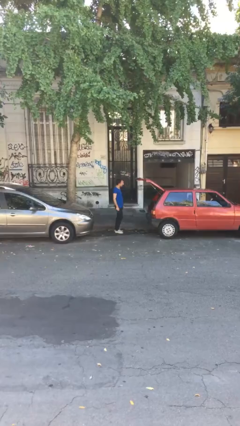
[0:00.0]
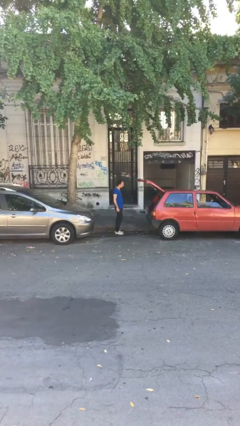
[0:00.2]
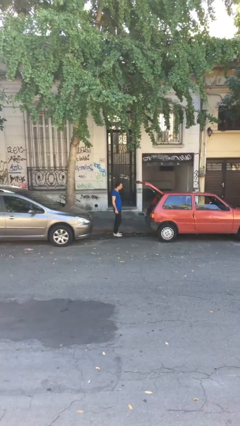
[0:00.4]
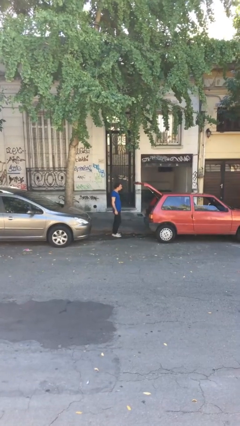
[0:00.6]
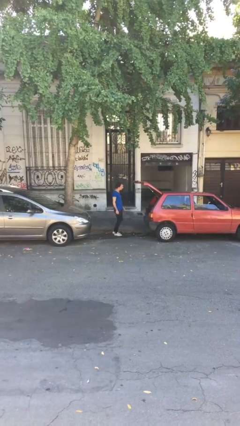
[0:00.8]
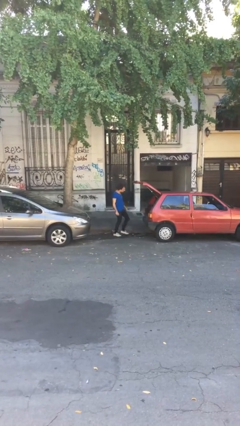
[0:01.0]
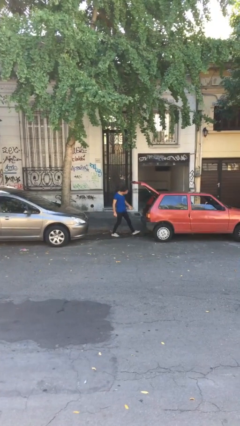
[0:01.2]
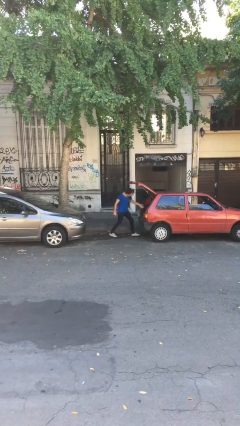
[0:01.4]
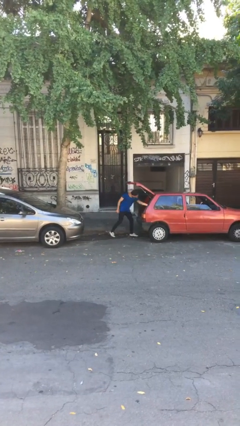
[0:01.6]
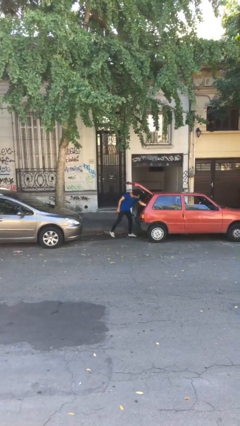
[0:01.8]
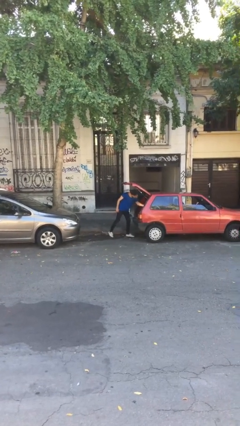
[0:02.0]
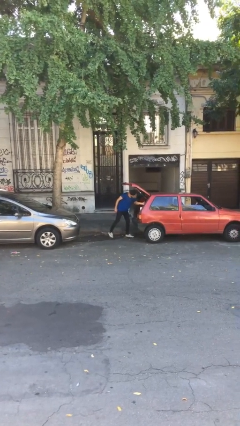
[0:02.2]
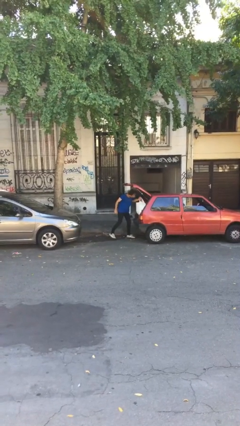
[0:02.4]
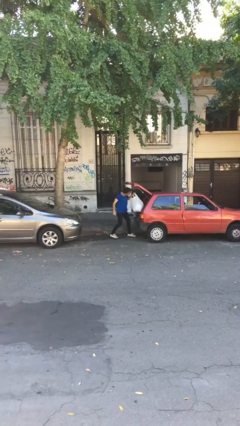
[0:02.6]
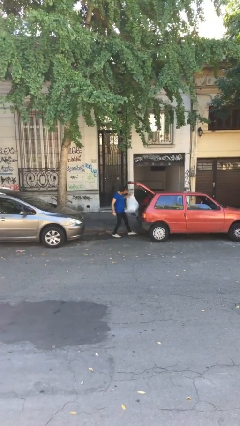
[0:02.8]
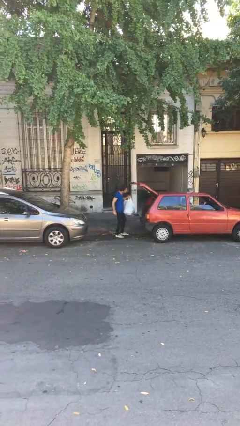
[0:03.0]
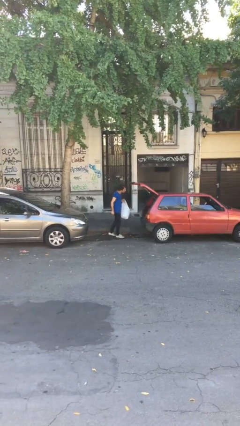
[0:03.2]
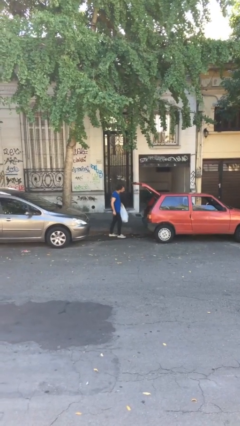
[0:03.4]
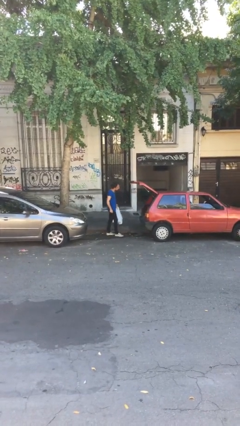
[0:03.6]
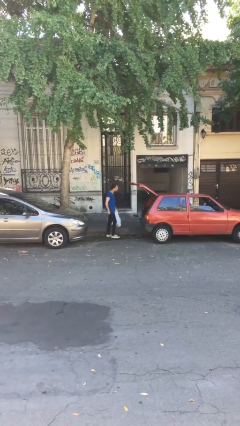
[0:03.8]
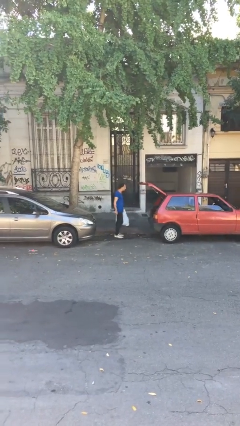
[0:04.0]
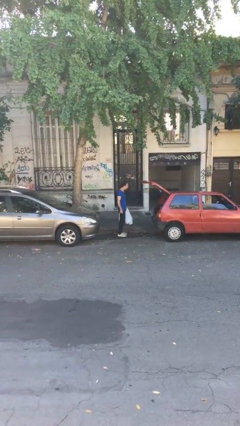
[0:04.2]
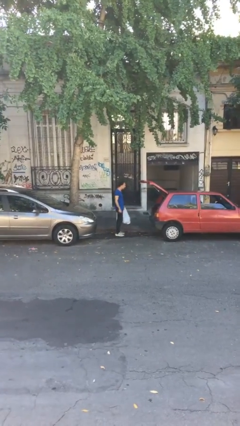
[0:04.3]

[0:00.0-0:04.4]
person unloads car

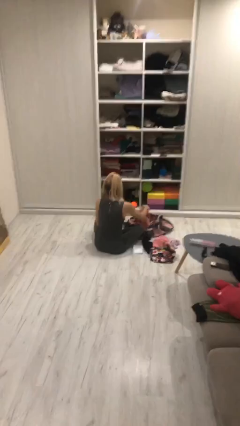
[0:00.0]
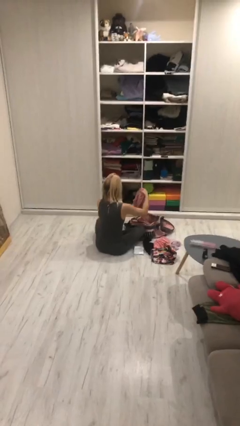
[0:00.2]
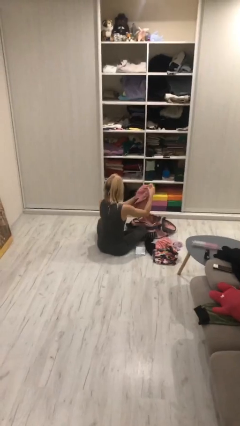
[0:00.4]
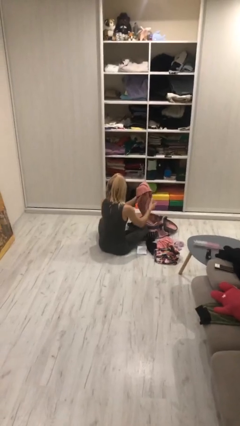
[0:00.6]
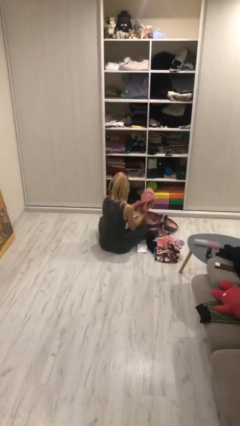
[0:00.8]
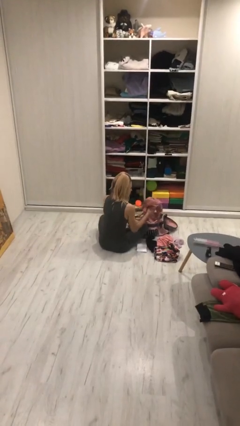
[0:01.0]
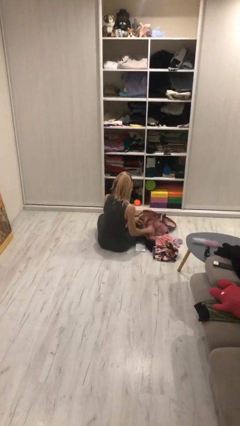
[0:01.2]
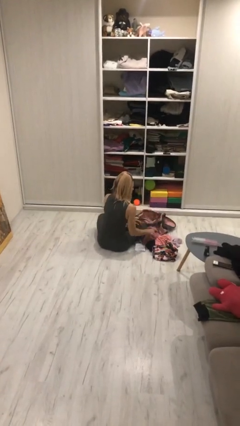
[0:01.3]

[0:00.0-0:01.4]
person unloads clothes from suitcase

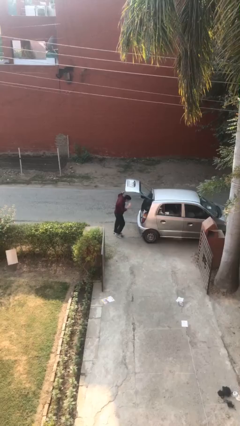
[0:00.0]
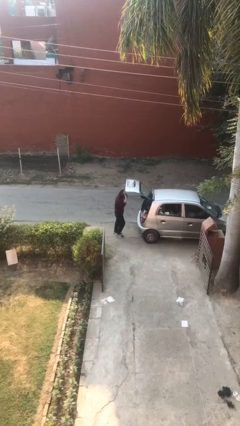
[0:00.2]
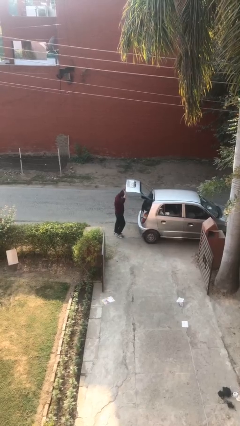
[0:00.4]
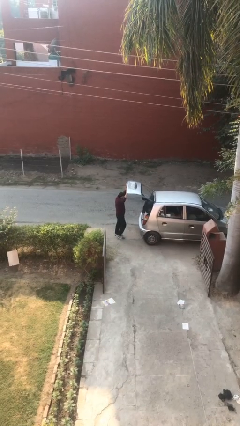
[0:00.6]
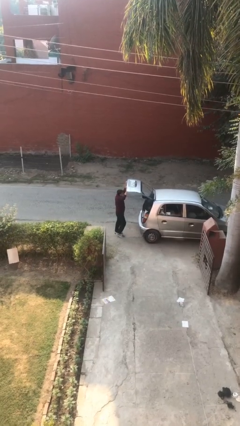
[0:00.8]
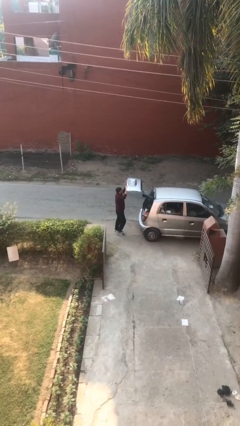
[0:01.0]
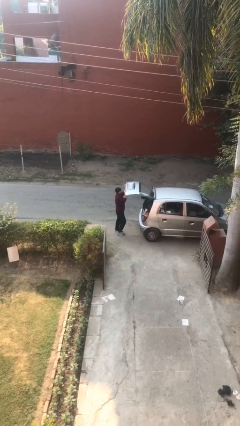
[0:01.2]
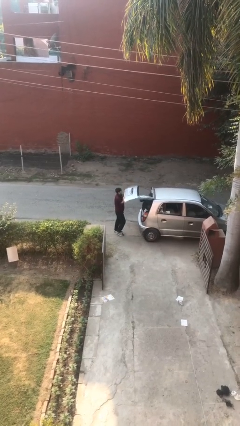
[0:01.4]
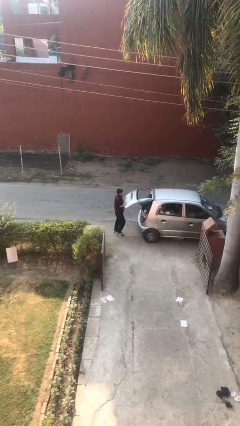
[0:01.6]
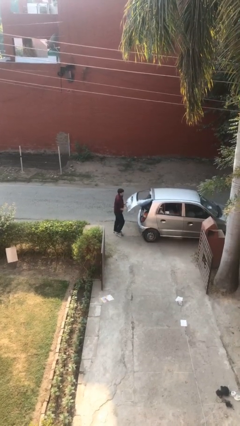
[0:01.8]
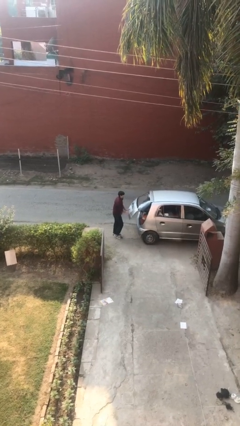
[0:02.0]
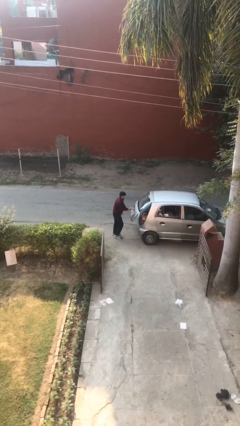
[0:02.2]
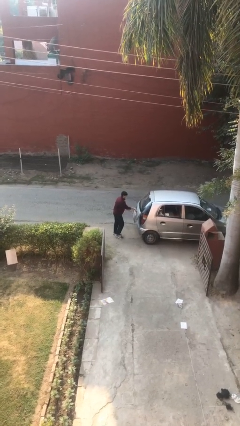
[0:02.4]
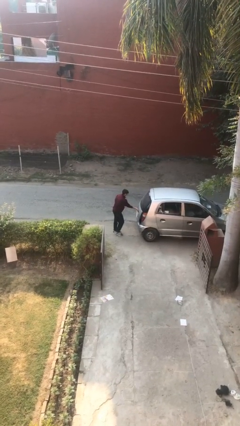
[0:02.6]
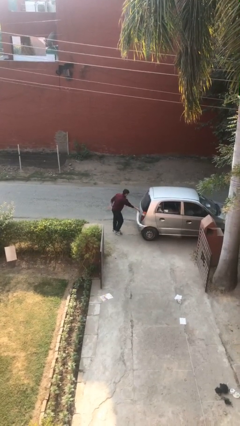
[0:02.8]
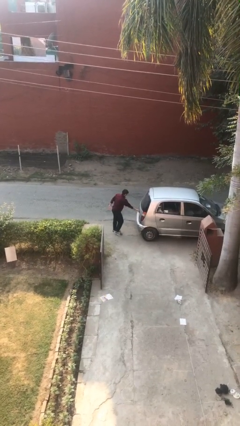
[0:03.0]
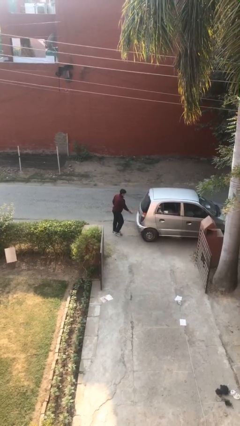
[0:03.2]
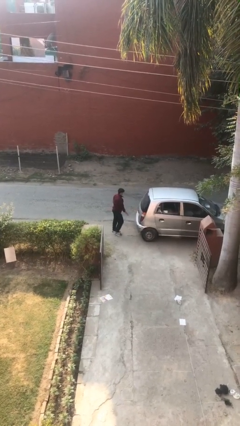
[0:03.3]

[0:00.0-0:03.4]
person closes car trunk

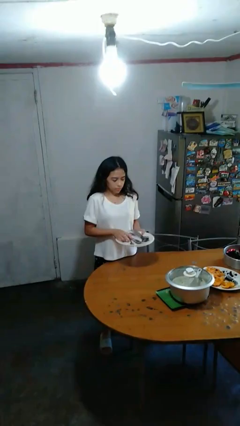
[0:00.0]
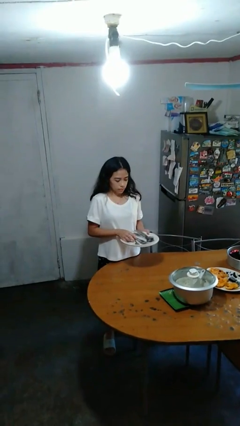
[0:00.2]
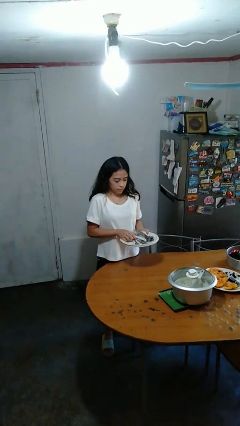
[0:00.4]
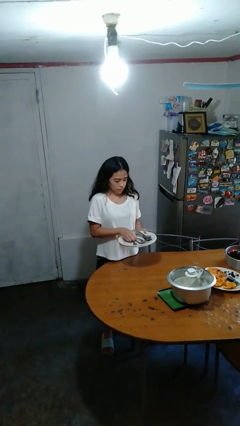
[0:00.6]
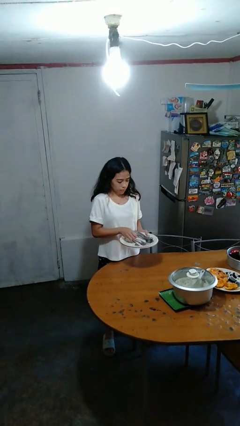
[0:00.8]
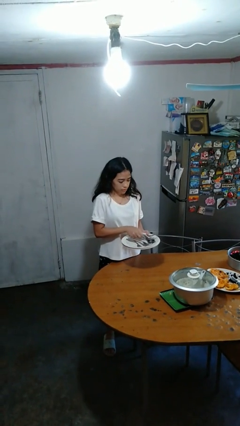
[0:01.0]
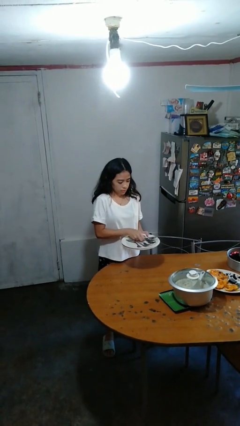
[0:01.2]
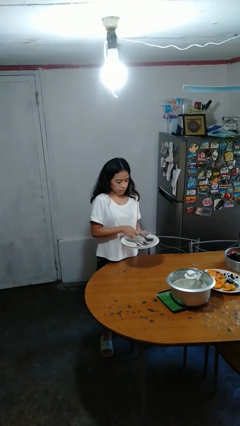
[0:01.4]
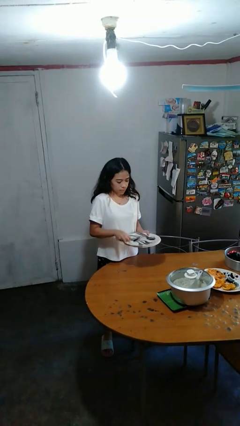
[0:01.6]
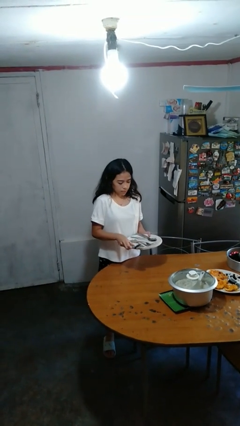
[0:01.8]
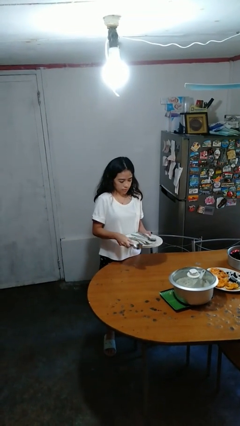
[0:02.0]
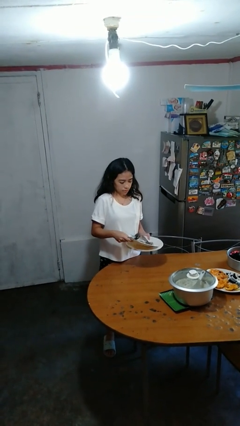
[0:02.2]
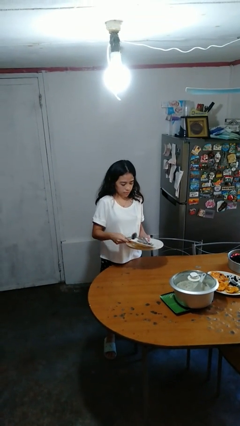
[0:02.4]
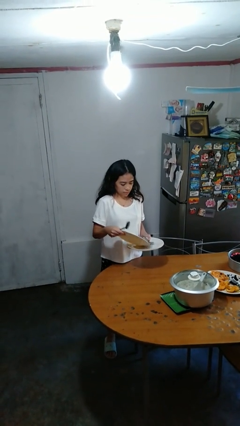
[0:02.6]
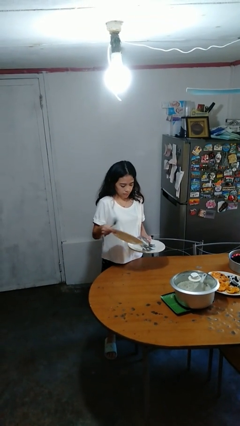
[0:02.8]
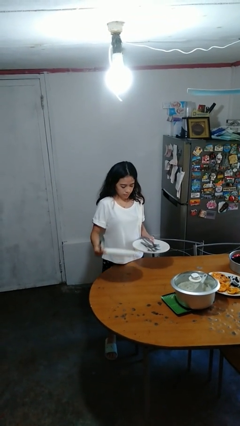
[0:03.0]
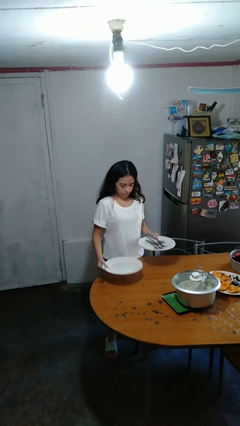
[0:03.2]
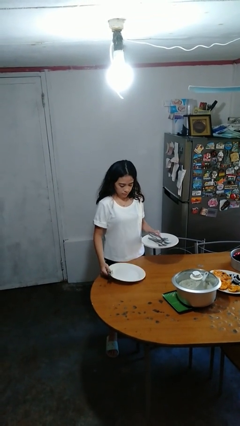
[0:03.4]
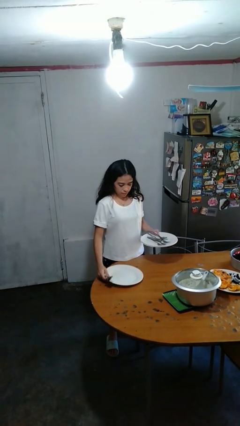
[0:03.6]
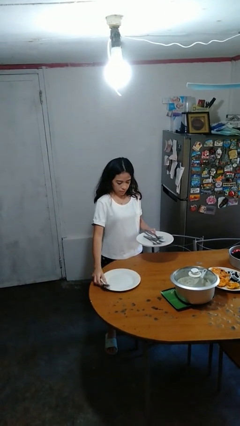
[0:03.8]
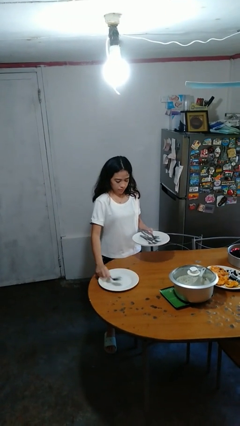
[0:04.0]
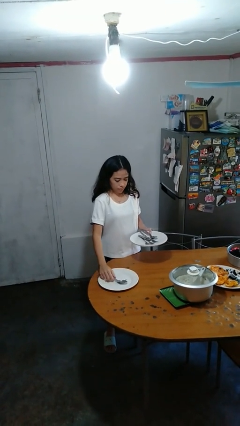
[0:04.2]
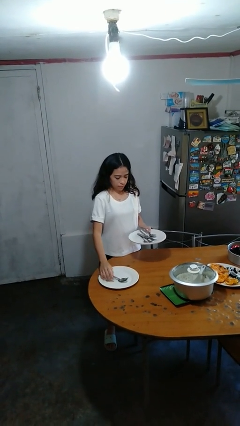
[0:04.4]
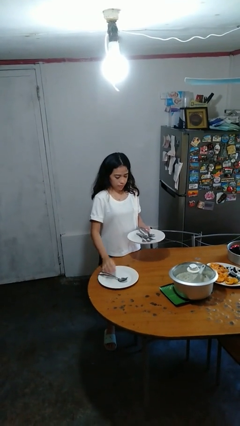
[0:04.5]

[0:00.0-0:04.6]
person sets table

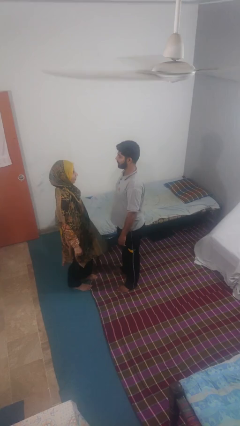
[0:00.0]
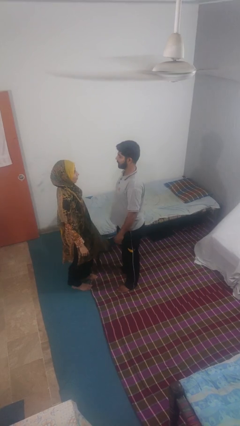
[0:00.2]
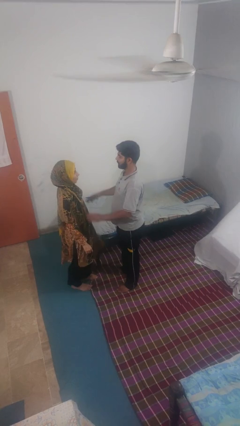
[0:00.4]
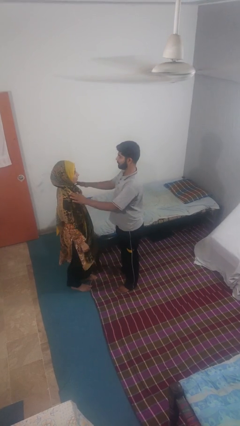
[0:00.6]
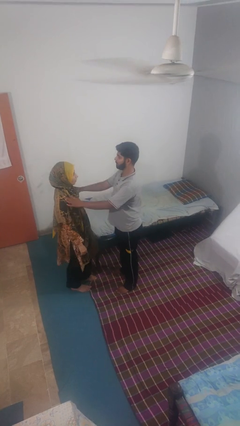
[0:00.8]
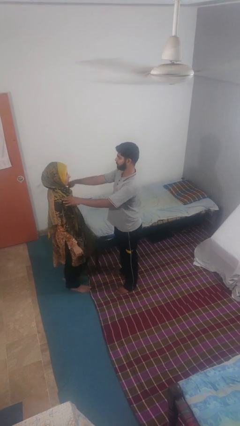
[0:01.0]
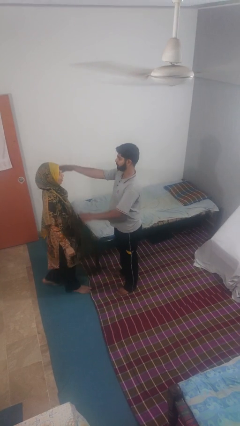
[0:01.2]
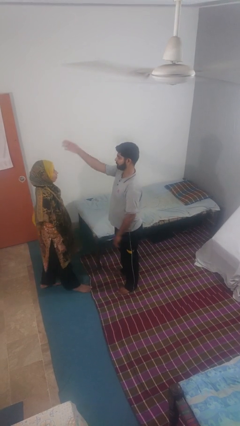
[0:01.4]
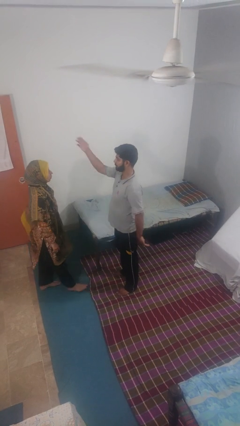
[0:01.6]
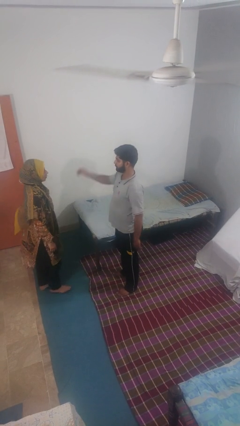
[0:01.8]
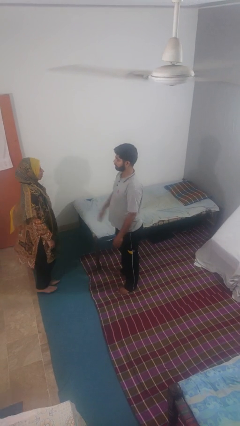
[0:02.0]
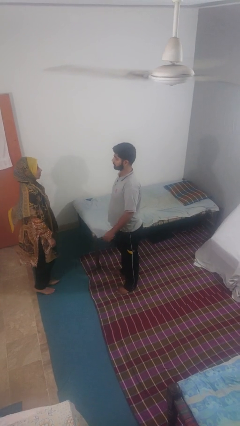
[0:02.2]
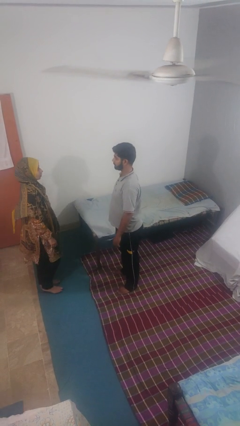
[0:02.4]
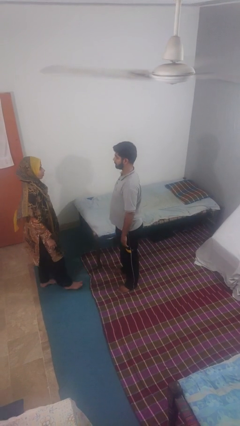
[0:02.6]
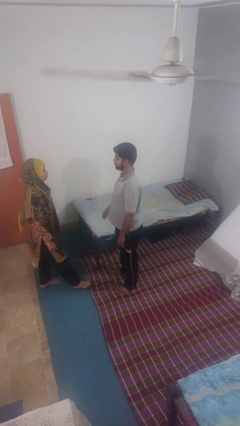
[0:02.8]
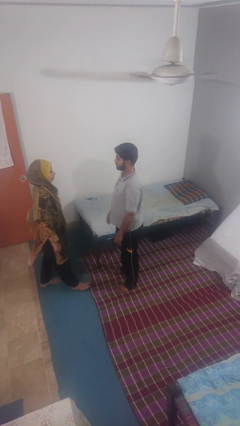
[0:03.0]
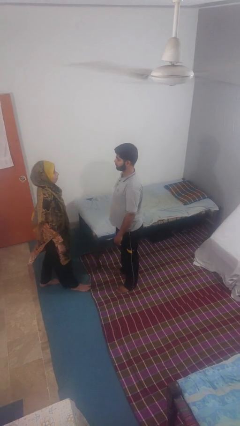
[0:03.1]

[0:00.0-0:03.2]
person shoves person

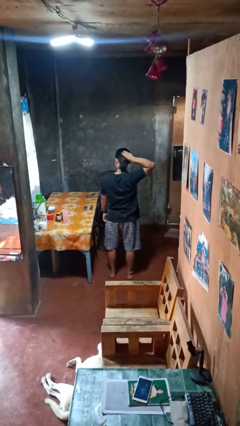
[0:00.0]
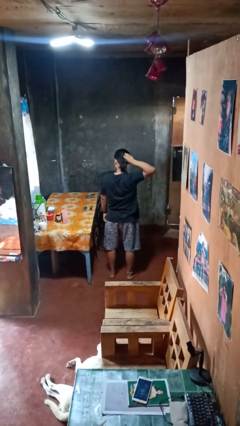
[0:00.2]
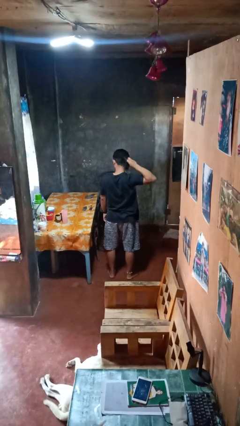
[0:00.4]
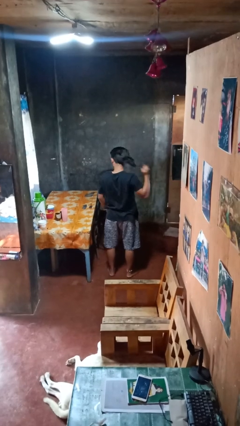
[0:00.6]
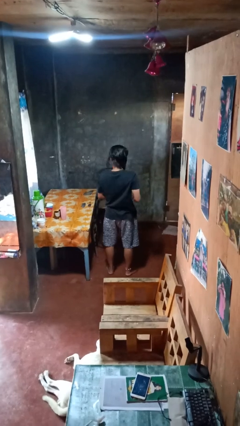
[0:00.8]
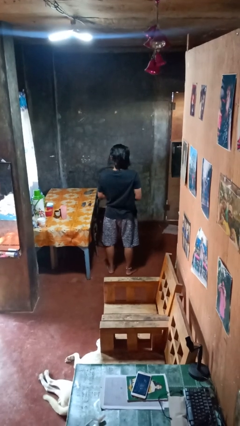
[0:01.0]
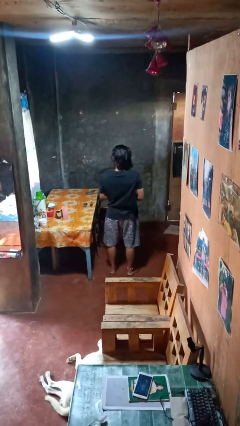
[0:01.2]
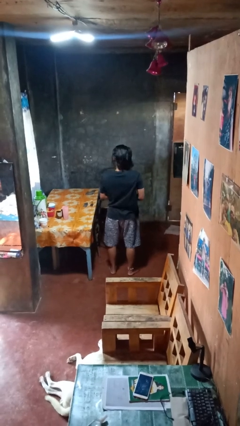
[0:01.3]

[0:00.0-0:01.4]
person takes off hairtie
